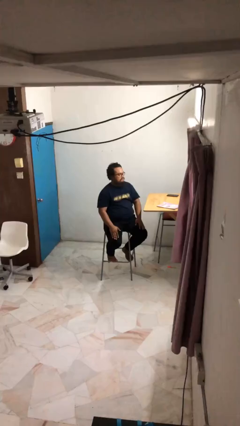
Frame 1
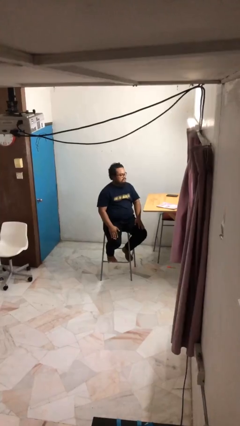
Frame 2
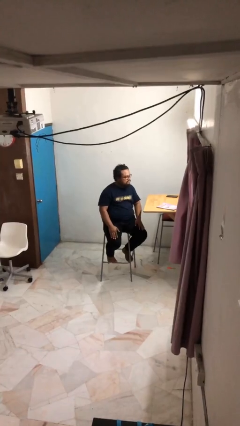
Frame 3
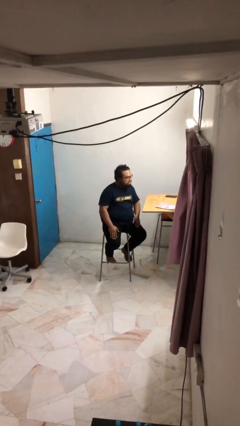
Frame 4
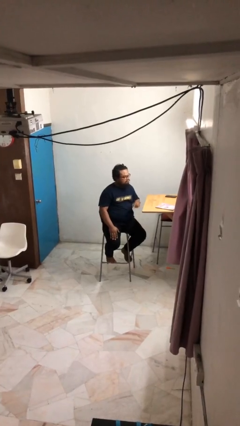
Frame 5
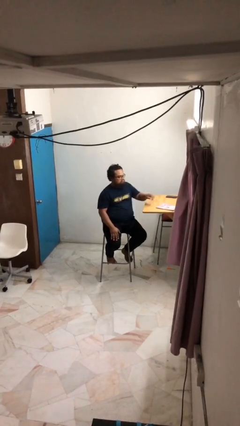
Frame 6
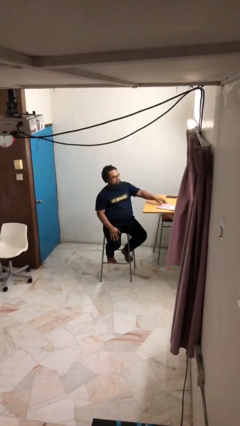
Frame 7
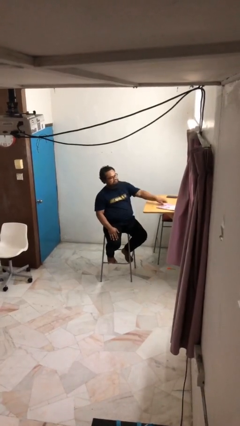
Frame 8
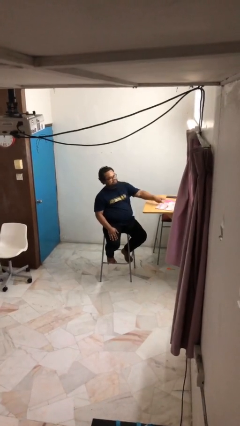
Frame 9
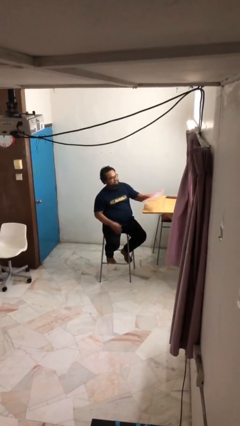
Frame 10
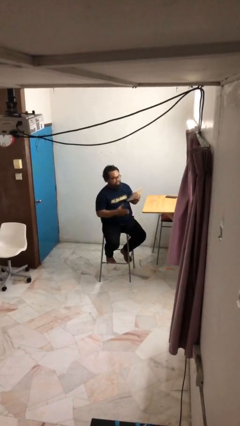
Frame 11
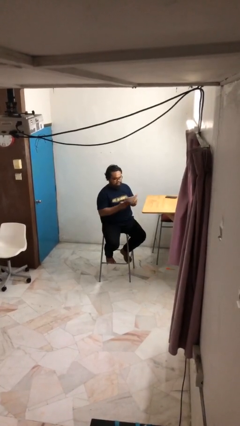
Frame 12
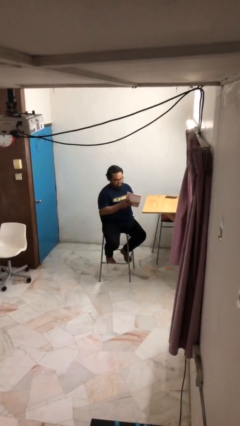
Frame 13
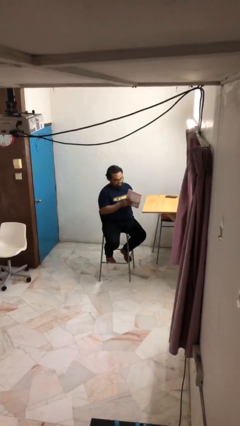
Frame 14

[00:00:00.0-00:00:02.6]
person picks up object from table

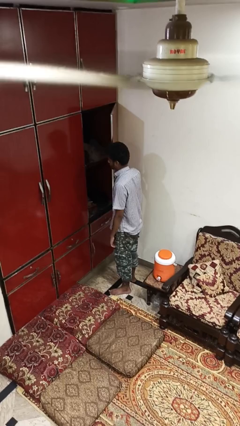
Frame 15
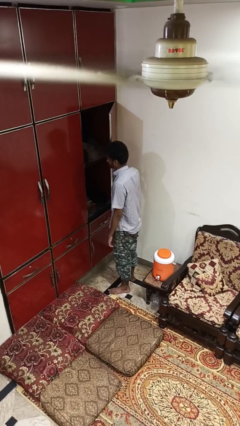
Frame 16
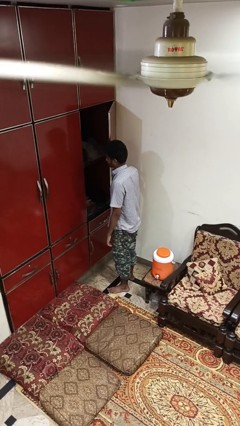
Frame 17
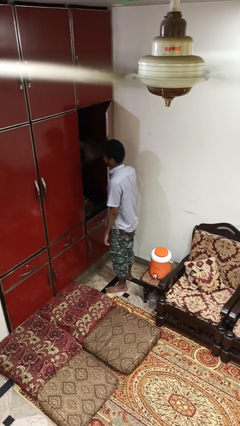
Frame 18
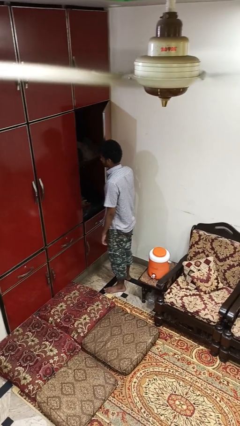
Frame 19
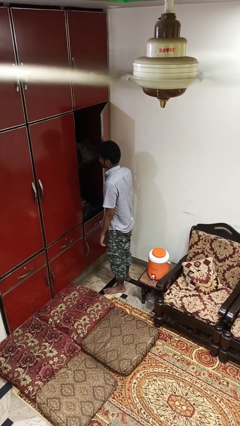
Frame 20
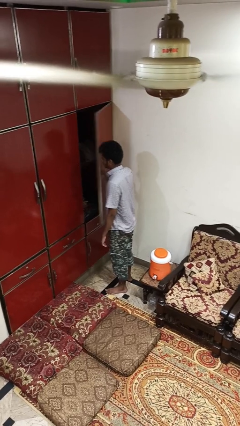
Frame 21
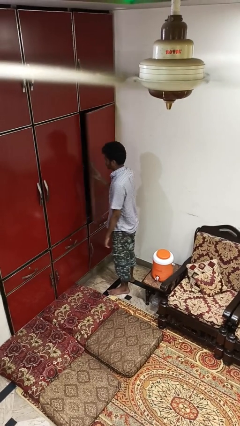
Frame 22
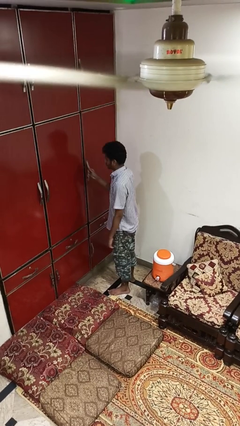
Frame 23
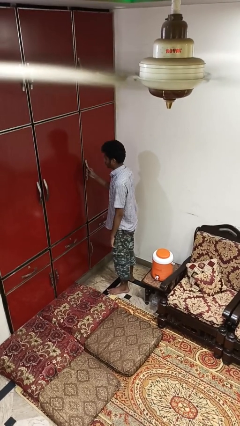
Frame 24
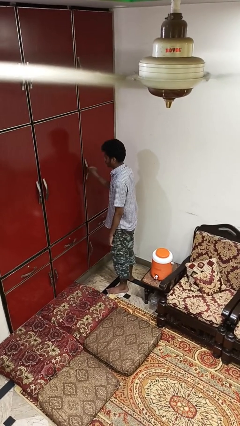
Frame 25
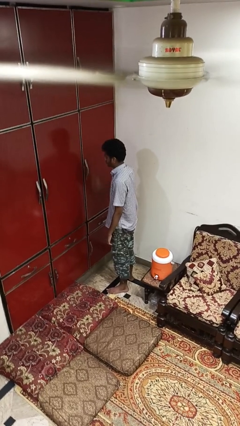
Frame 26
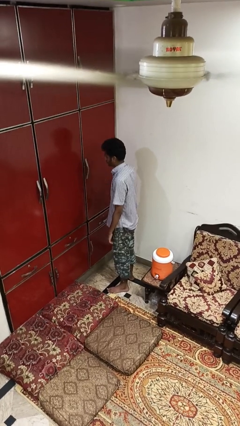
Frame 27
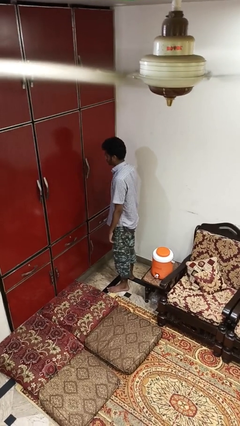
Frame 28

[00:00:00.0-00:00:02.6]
person closes cabinet

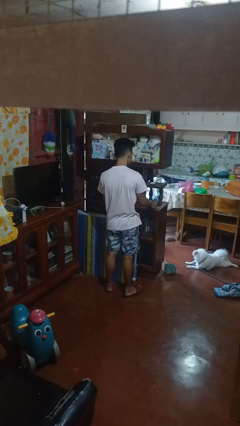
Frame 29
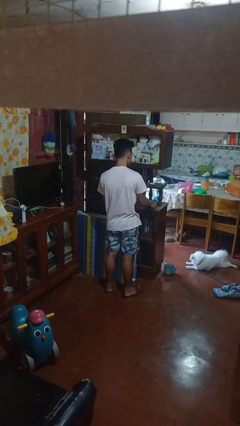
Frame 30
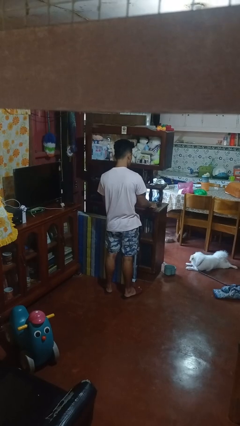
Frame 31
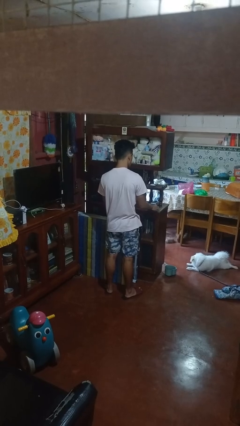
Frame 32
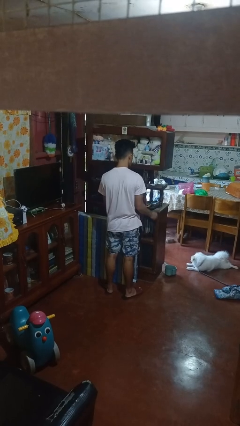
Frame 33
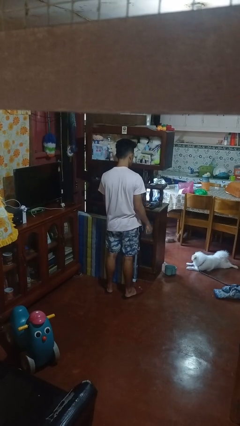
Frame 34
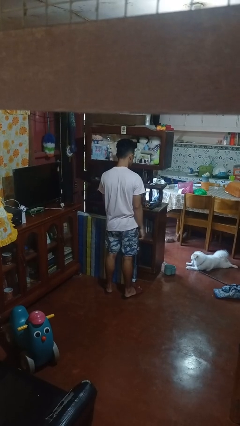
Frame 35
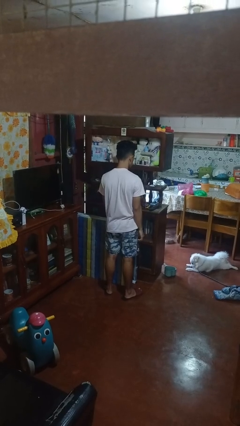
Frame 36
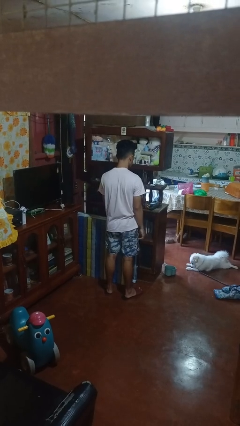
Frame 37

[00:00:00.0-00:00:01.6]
person puts down object on shelf

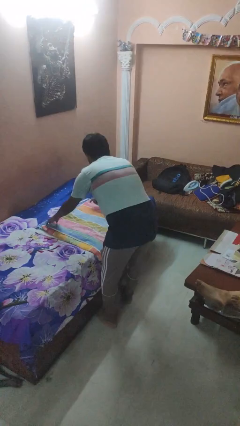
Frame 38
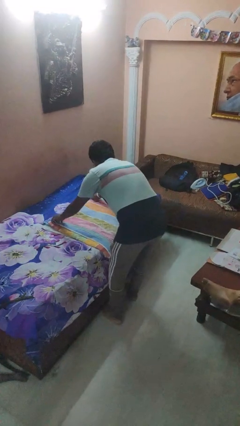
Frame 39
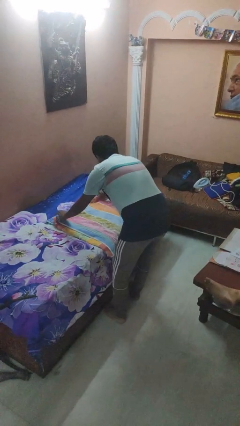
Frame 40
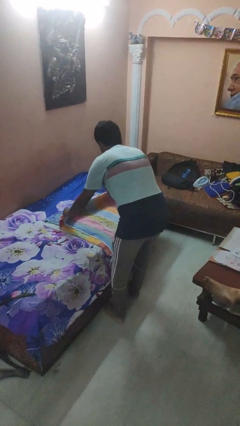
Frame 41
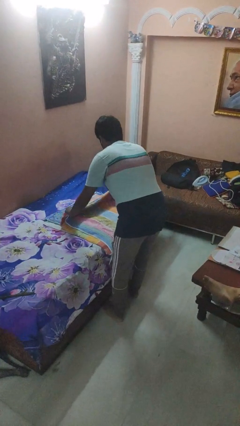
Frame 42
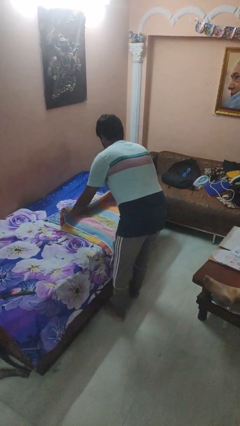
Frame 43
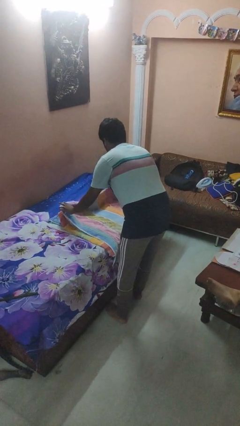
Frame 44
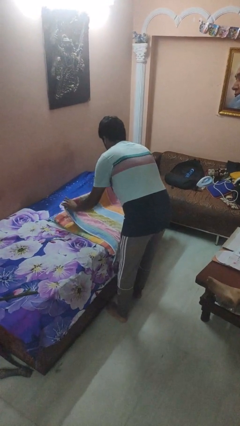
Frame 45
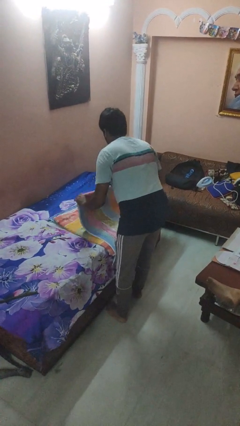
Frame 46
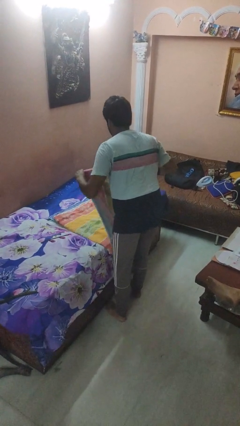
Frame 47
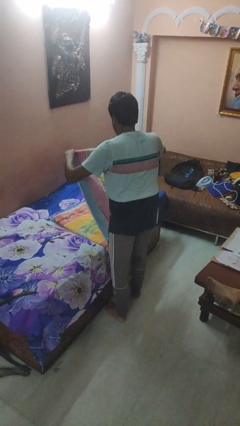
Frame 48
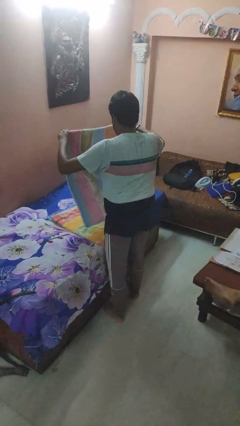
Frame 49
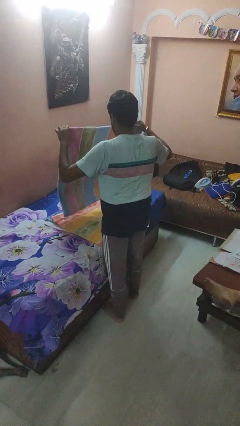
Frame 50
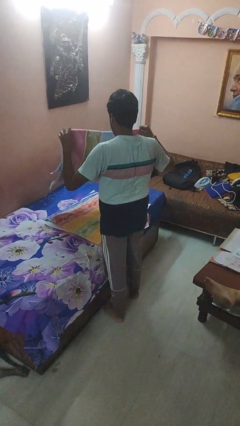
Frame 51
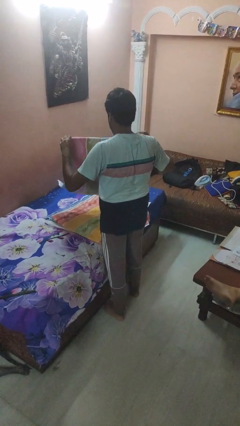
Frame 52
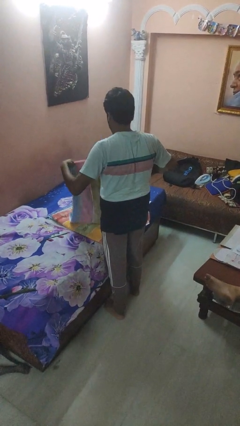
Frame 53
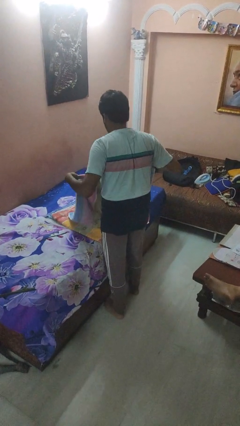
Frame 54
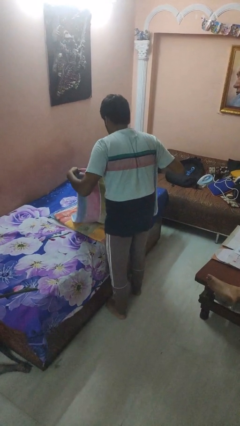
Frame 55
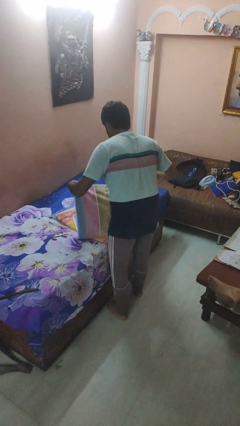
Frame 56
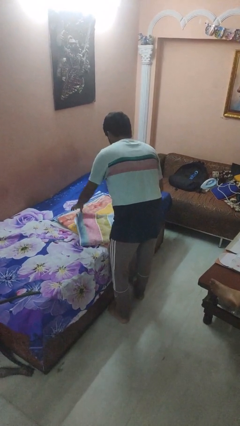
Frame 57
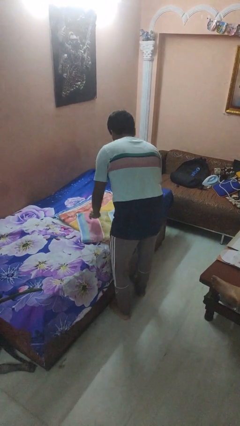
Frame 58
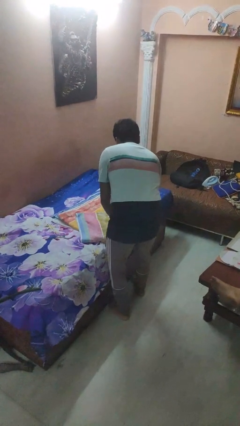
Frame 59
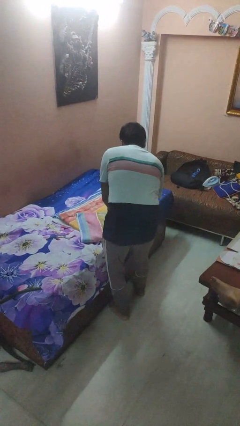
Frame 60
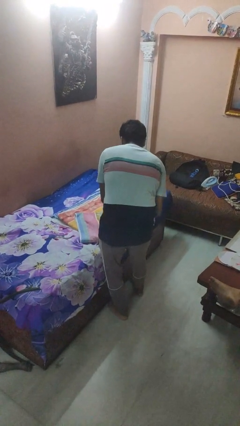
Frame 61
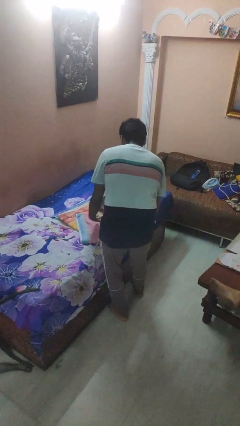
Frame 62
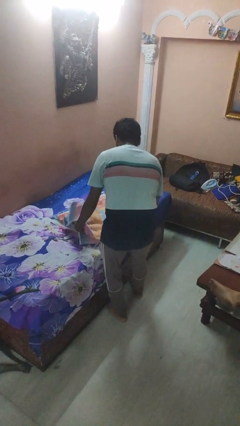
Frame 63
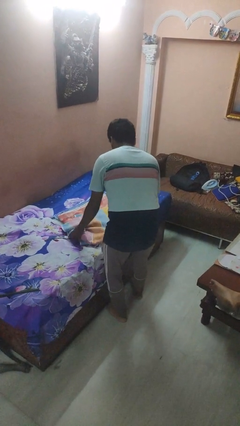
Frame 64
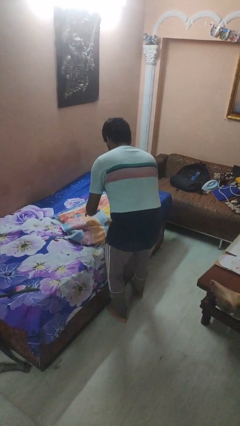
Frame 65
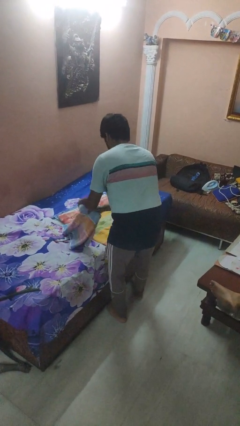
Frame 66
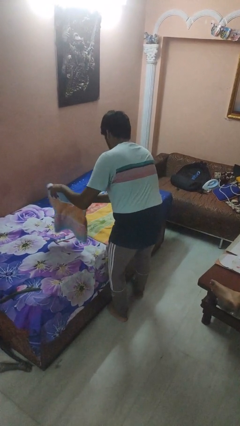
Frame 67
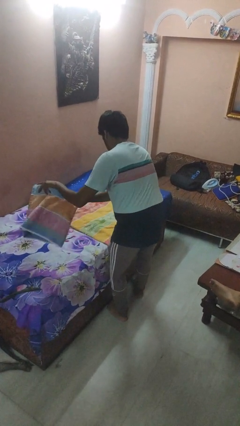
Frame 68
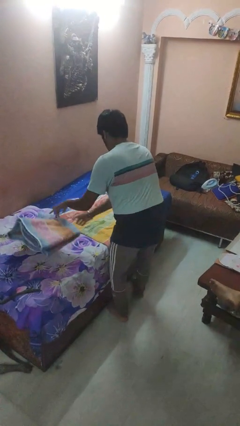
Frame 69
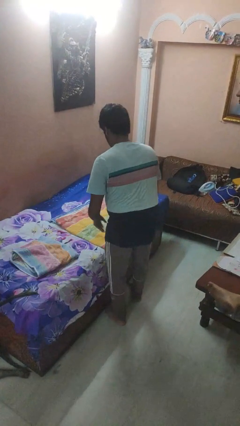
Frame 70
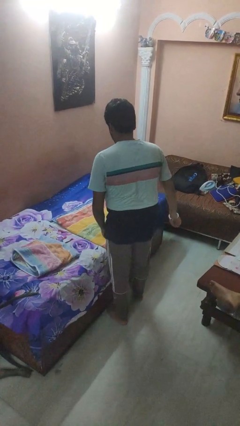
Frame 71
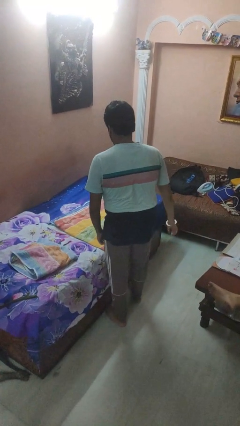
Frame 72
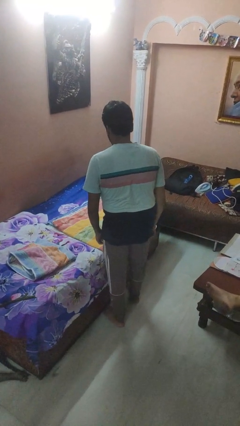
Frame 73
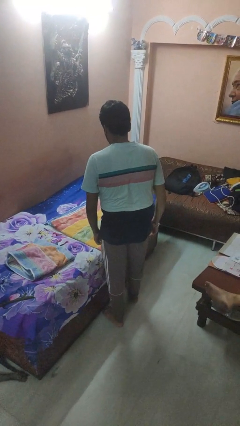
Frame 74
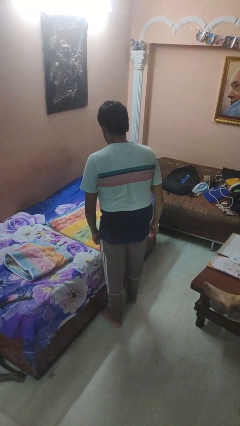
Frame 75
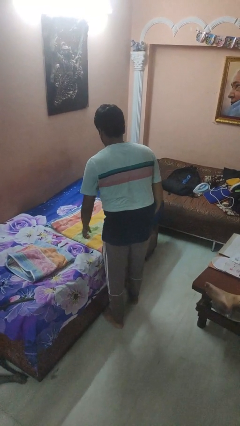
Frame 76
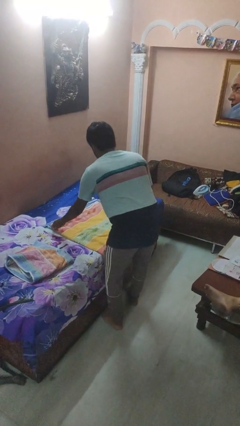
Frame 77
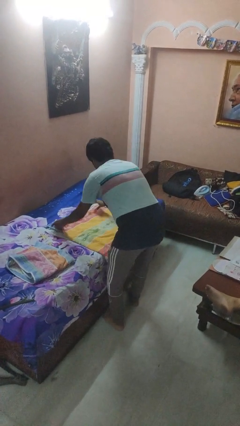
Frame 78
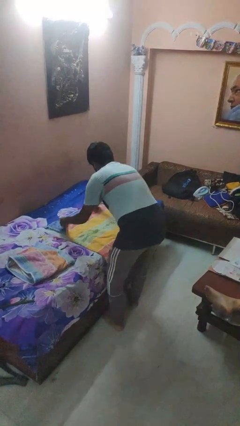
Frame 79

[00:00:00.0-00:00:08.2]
person folds towel

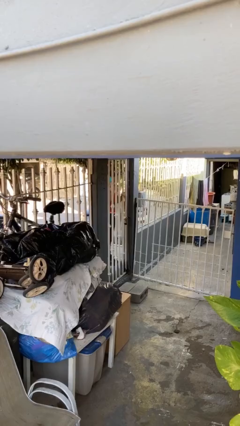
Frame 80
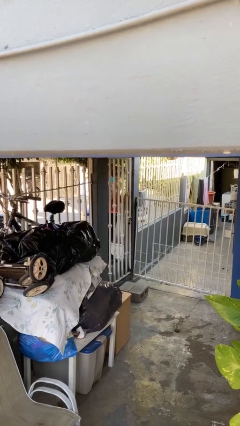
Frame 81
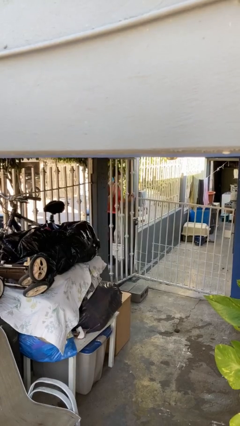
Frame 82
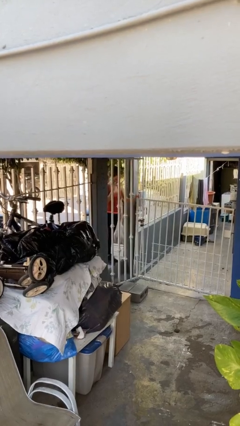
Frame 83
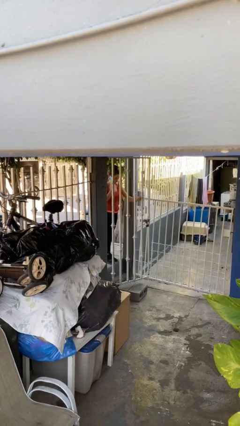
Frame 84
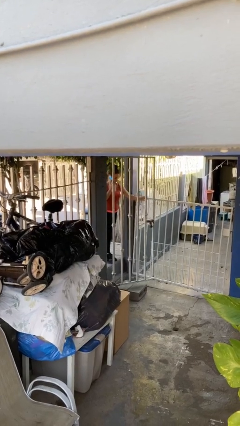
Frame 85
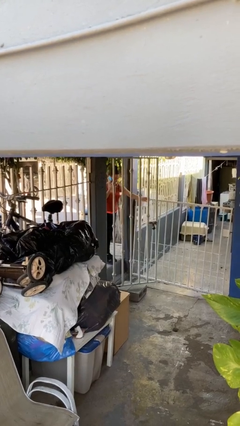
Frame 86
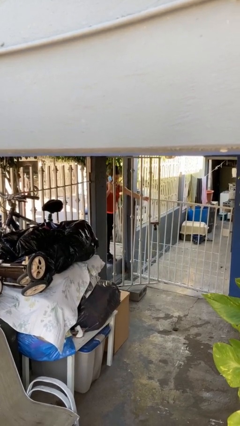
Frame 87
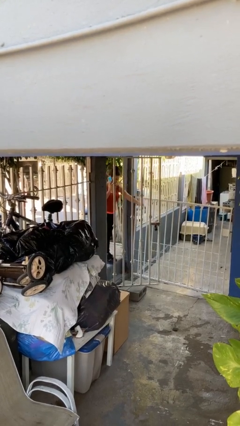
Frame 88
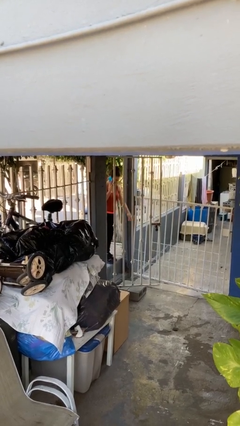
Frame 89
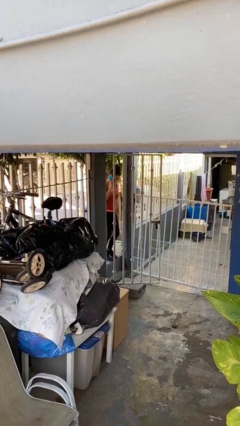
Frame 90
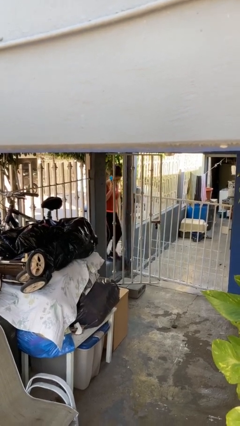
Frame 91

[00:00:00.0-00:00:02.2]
person opens facility door

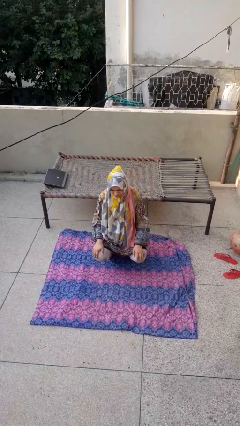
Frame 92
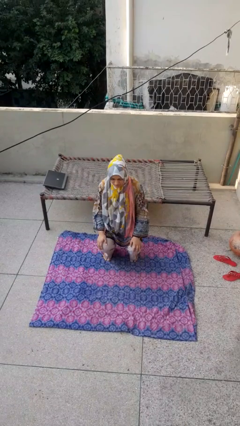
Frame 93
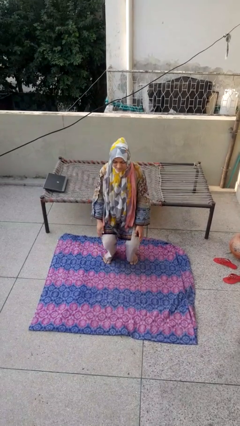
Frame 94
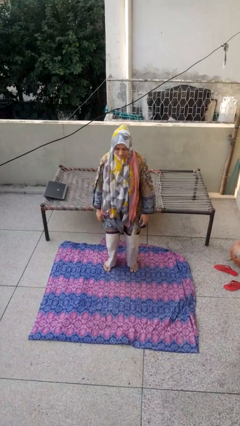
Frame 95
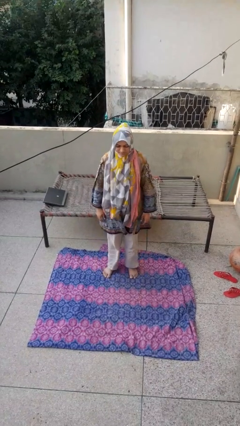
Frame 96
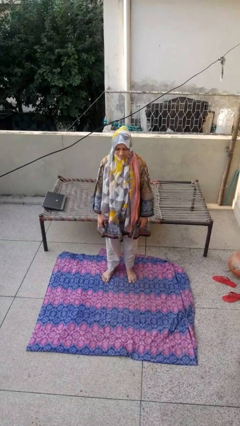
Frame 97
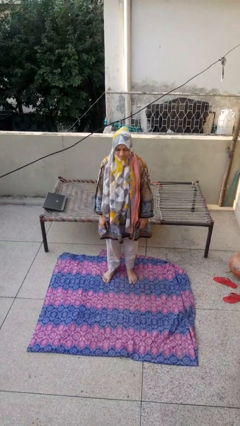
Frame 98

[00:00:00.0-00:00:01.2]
person stands up
